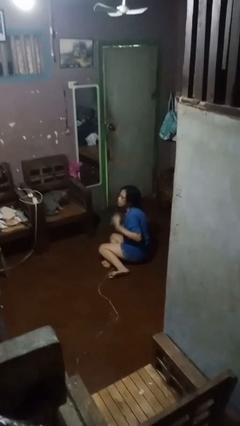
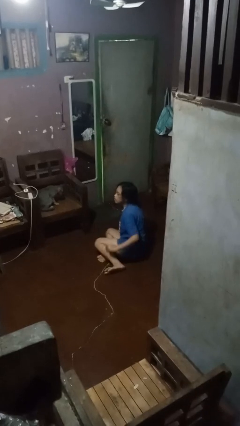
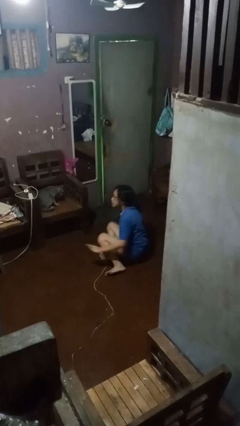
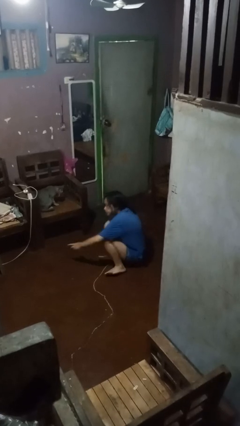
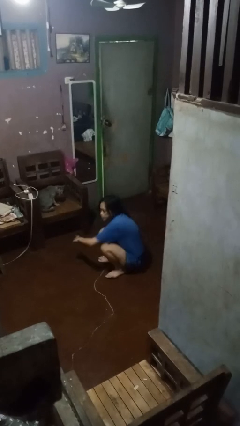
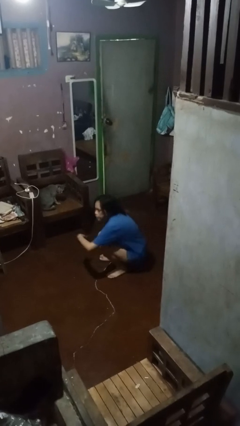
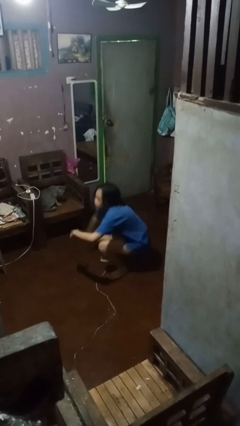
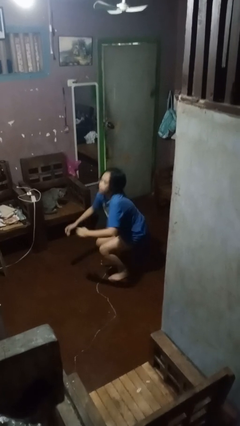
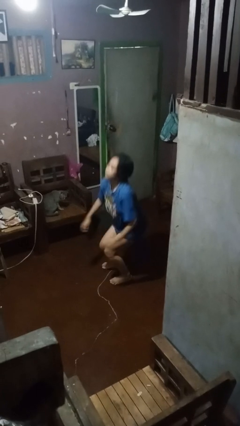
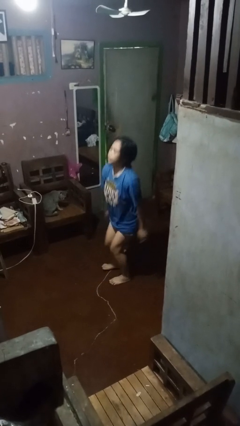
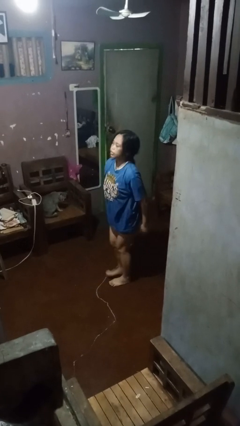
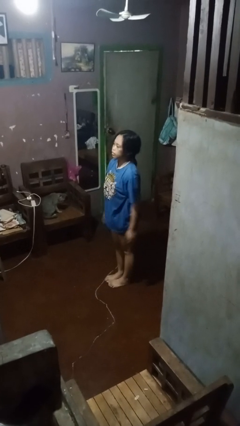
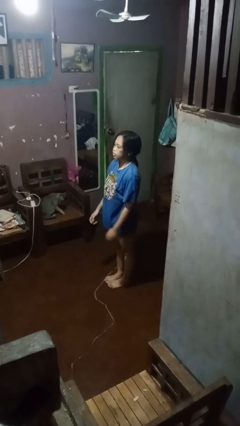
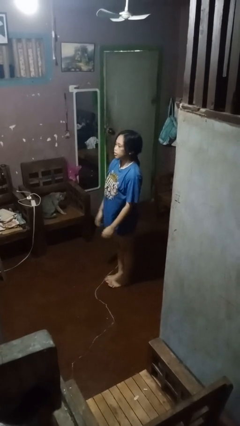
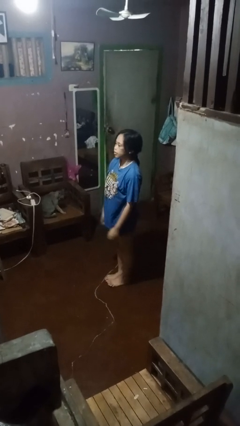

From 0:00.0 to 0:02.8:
person stands up from floor

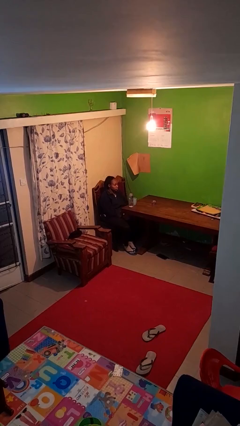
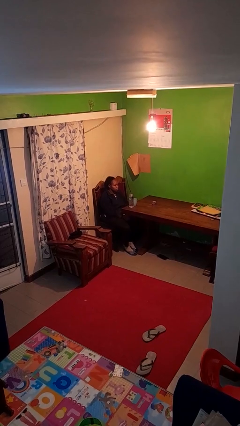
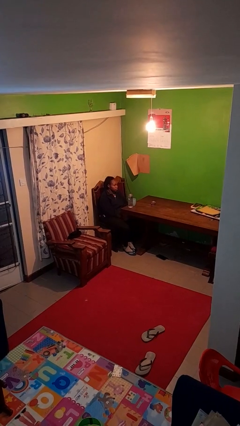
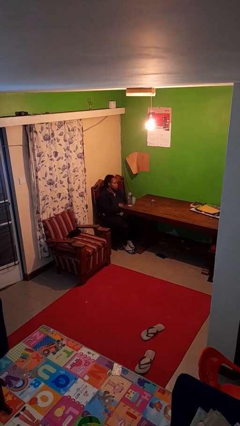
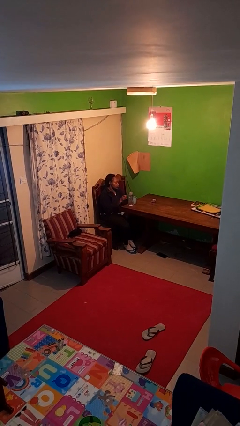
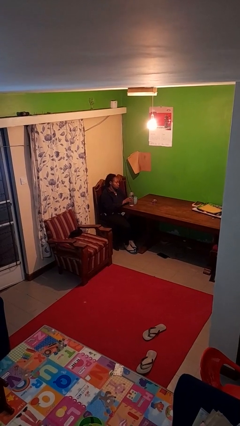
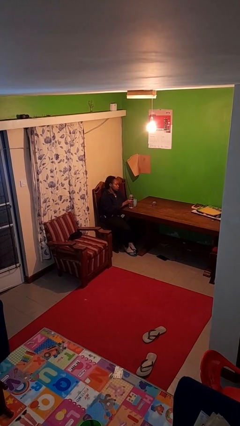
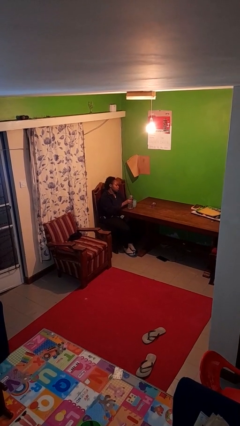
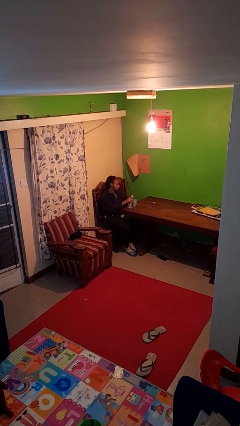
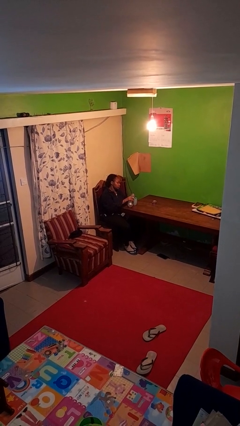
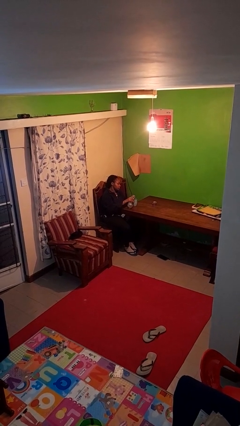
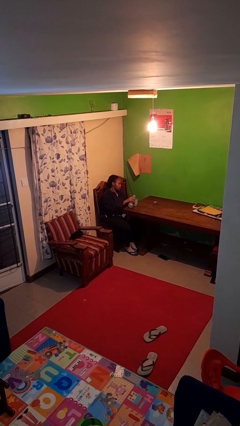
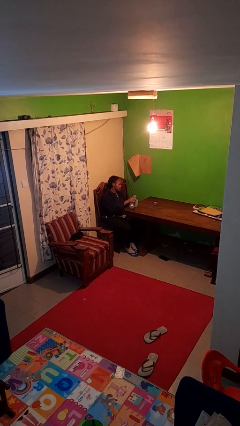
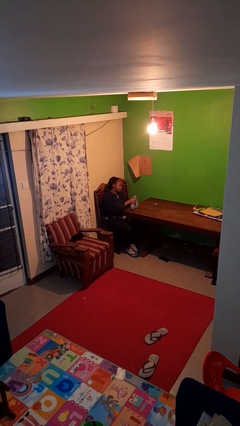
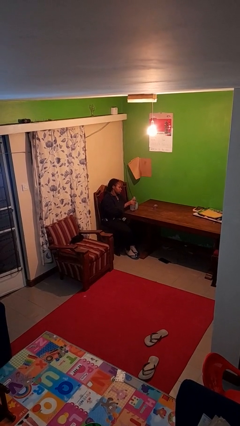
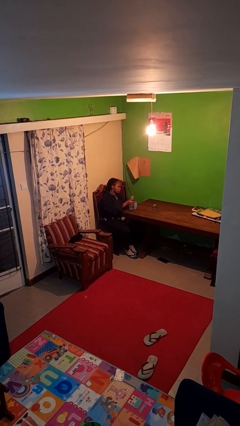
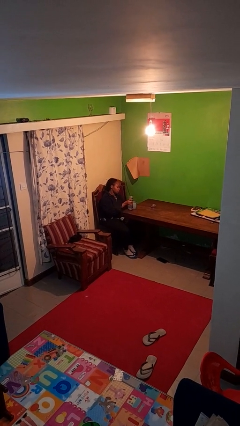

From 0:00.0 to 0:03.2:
person pours liquid into cup

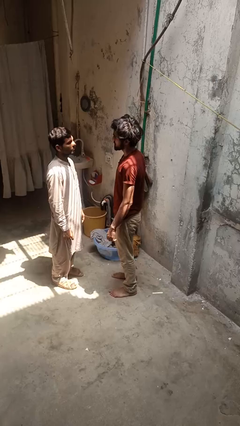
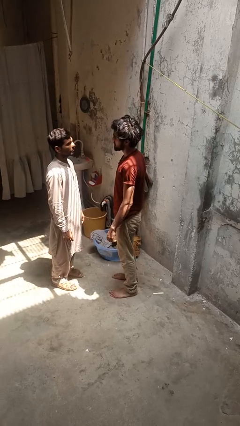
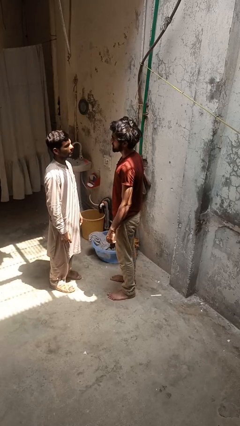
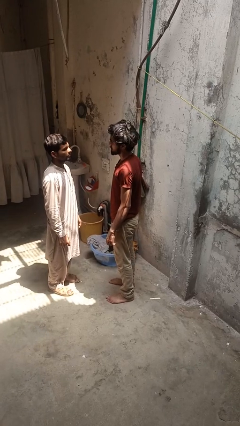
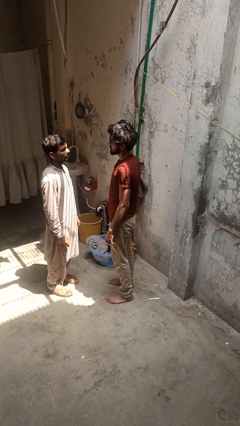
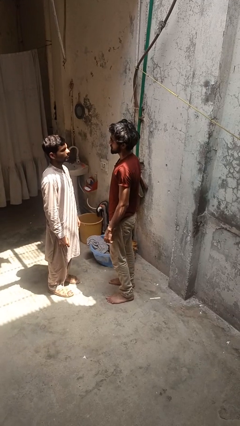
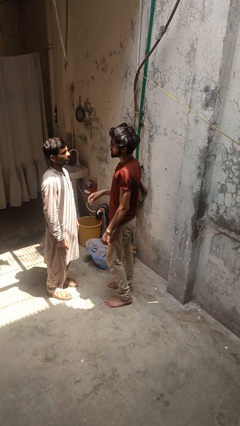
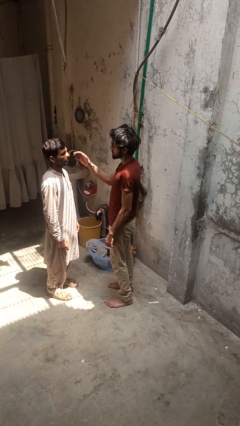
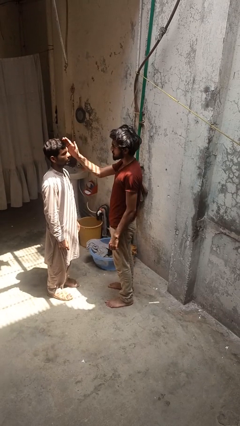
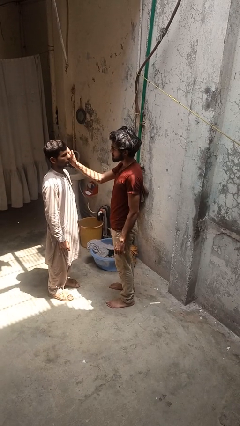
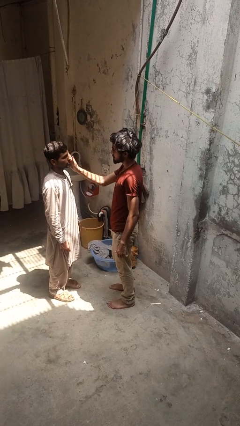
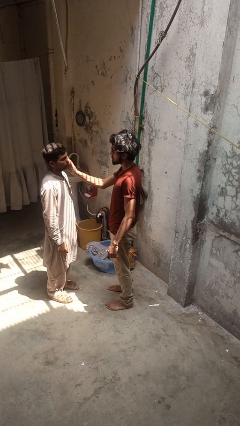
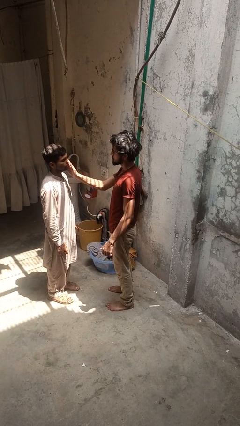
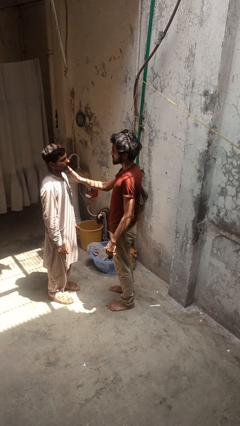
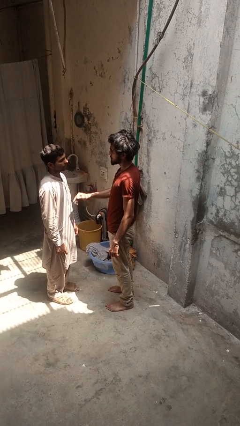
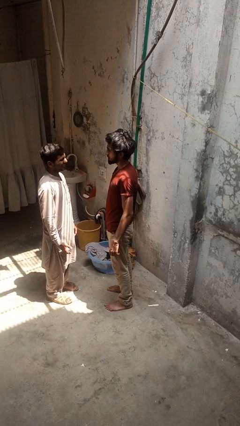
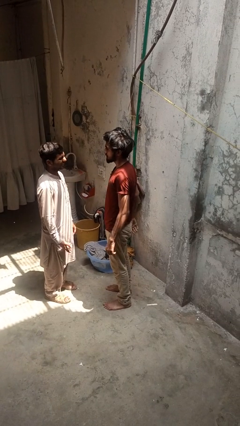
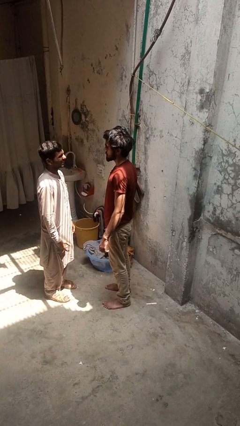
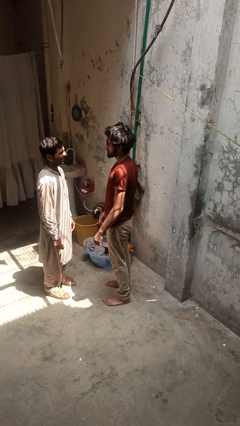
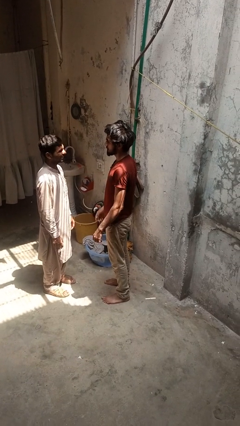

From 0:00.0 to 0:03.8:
person touches face of person

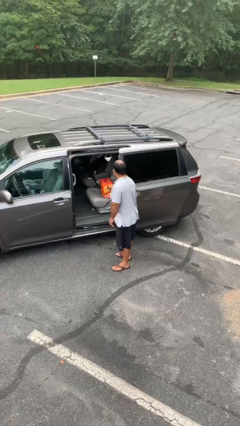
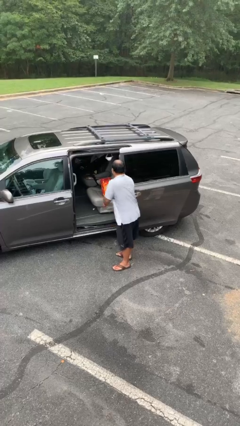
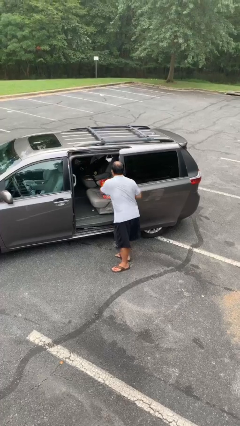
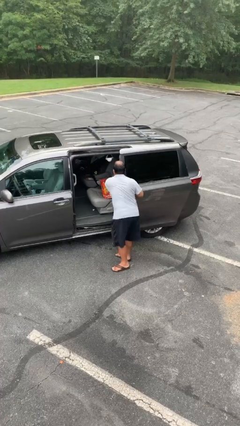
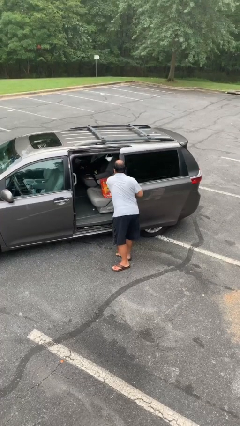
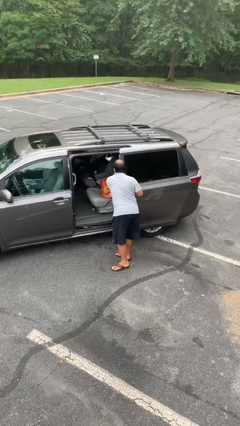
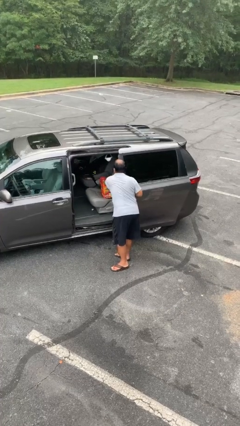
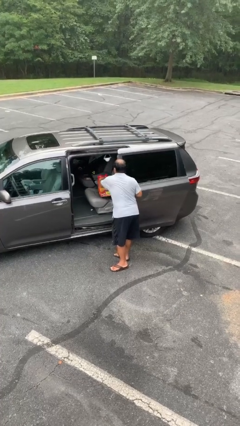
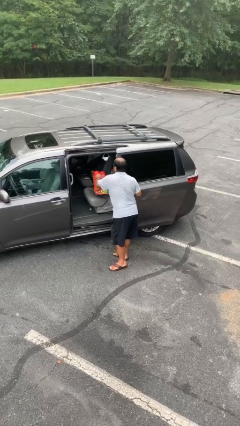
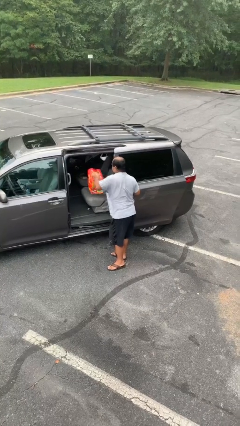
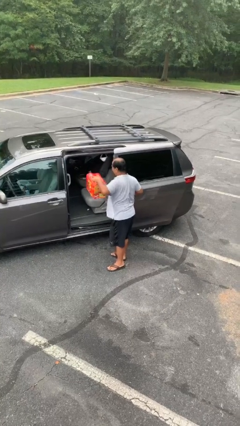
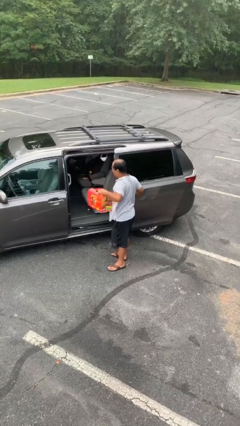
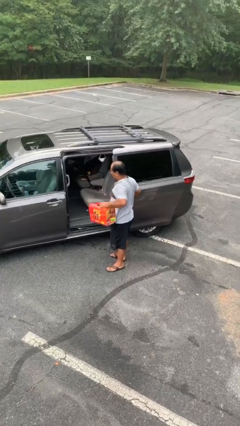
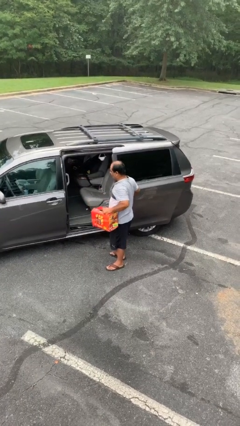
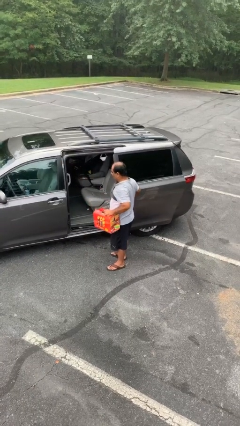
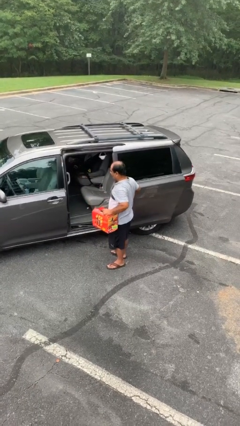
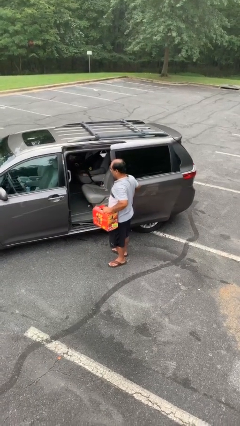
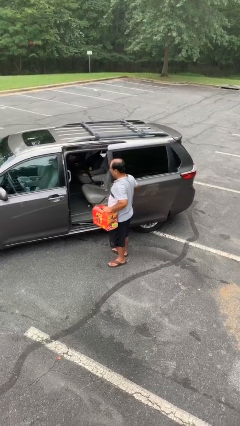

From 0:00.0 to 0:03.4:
person unloads car

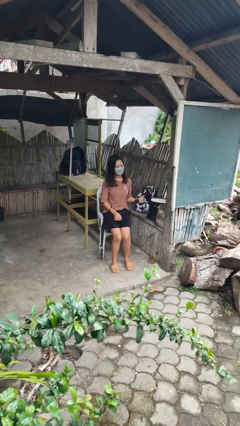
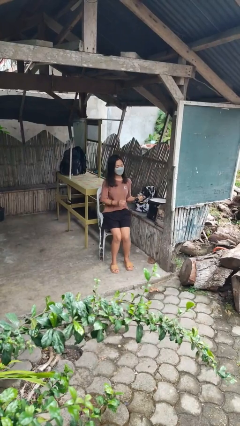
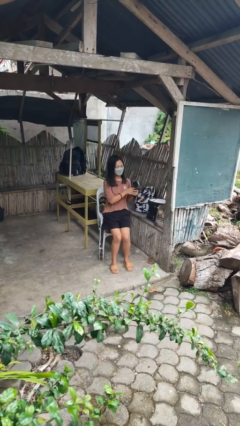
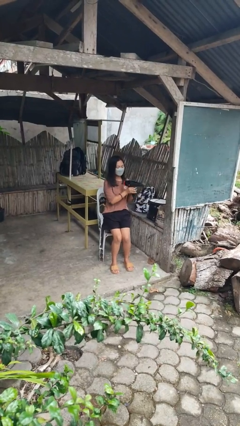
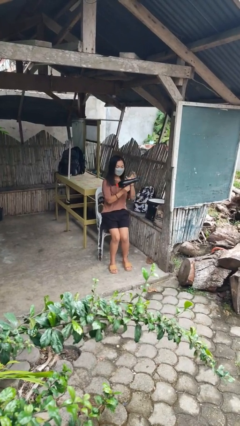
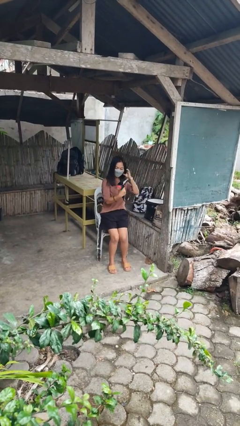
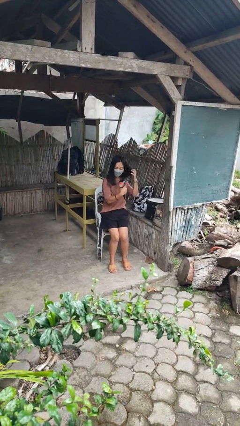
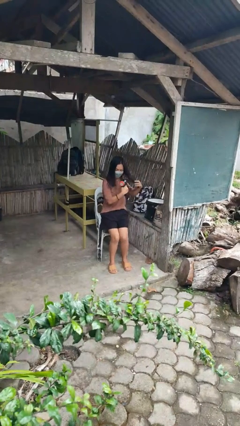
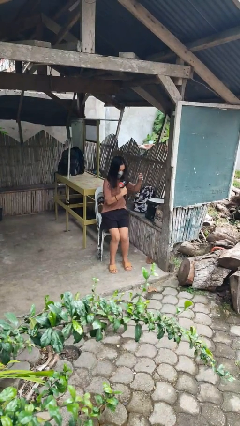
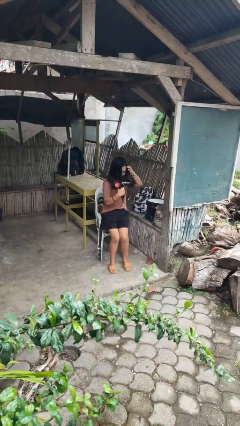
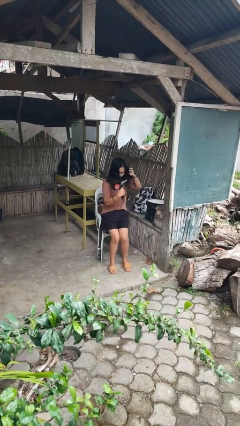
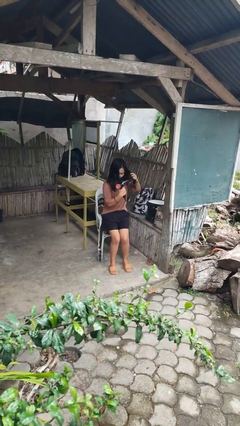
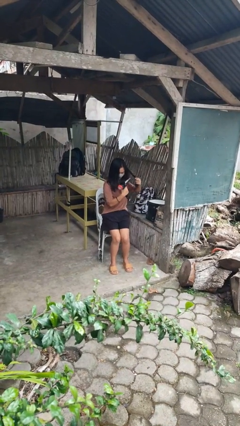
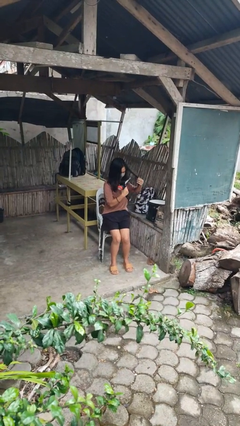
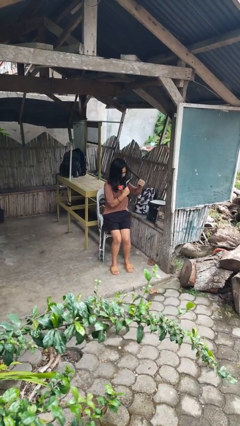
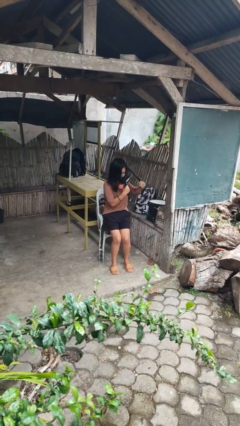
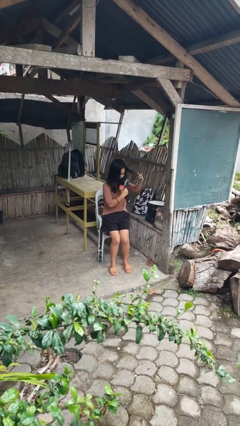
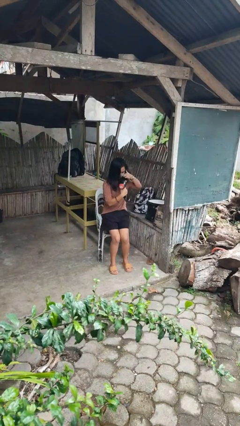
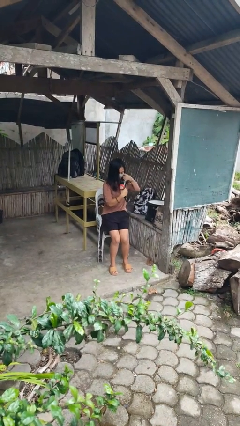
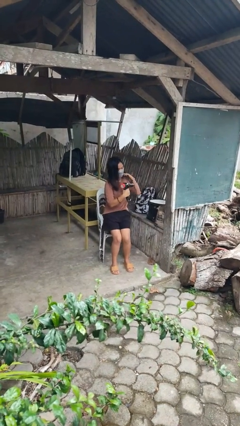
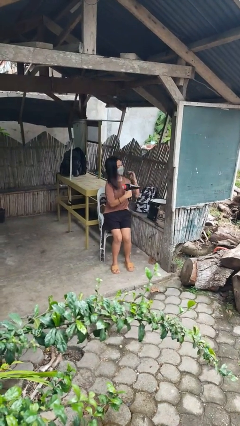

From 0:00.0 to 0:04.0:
person dries hair with hairdryer

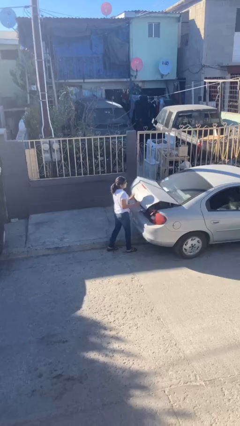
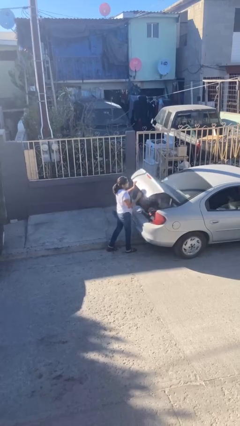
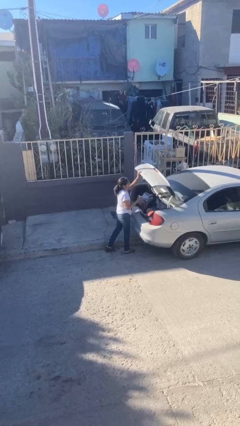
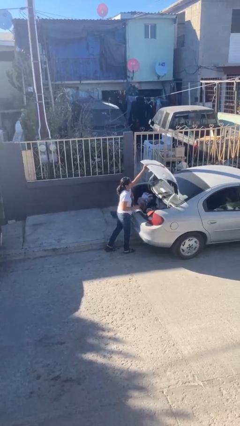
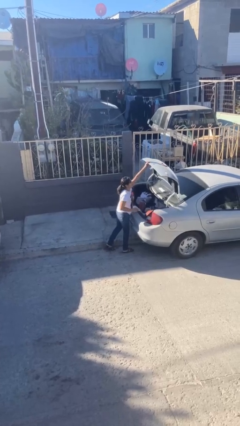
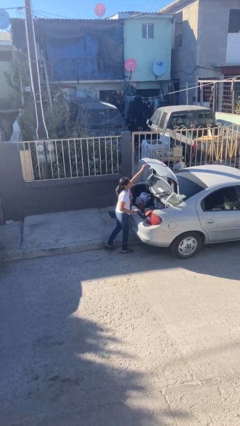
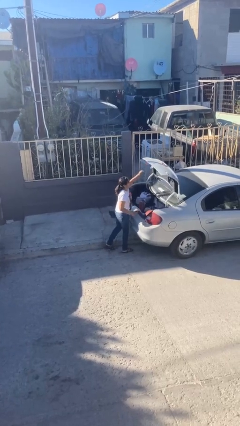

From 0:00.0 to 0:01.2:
person opens car trunk
